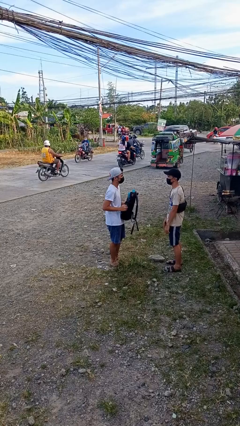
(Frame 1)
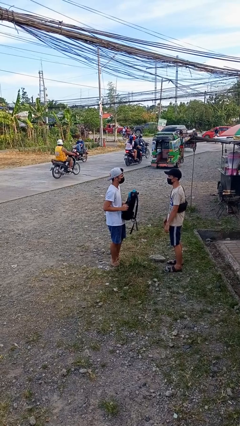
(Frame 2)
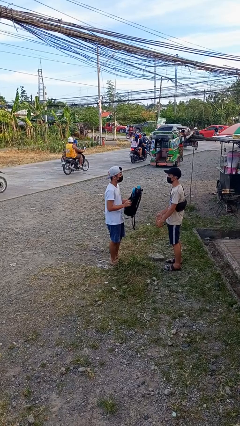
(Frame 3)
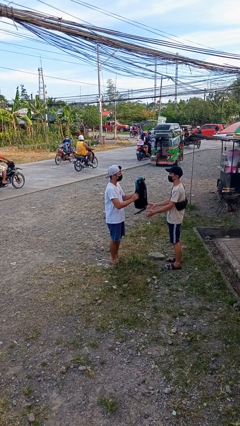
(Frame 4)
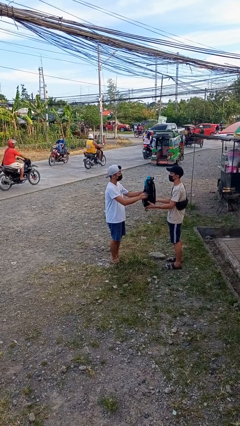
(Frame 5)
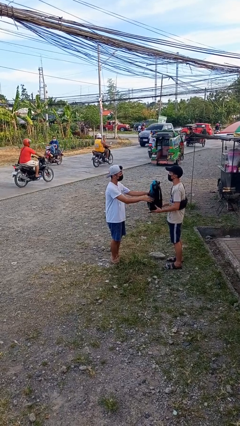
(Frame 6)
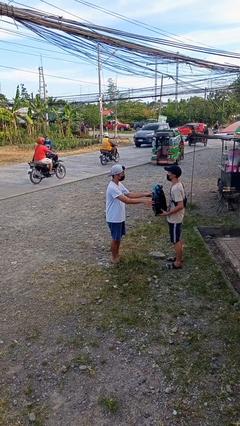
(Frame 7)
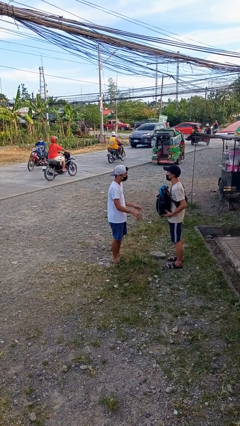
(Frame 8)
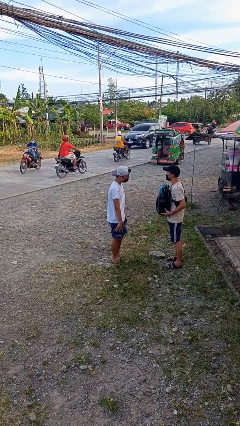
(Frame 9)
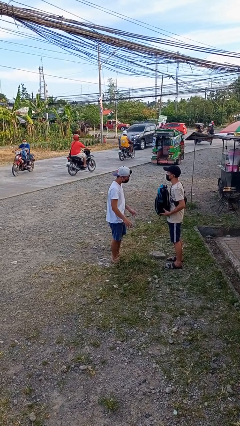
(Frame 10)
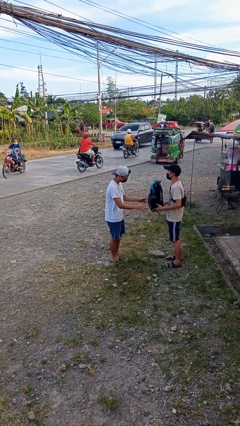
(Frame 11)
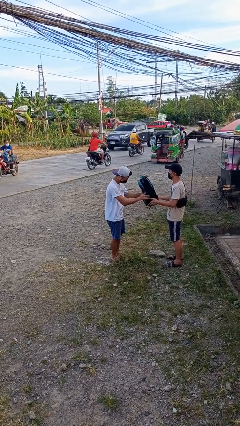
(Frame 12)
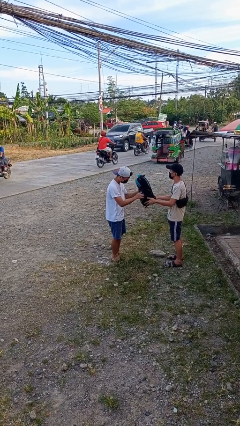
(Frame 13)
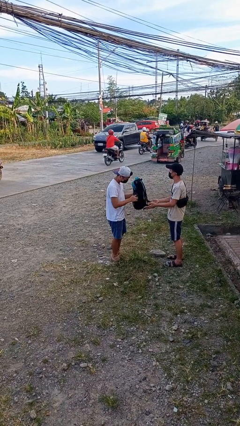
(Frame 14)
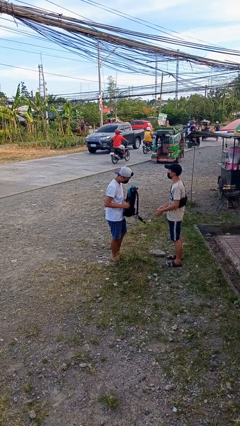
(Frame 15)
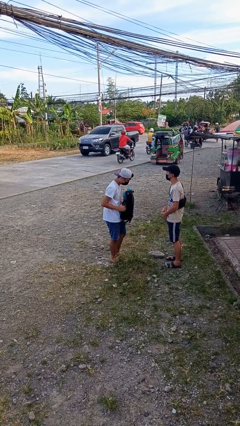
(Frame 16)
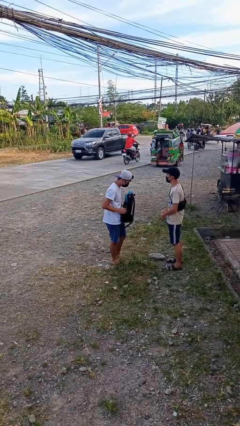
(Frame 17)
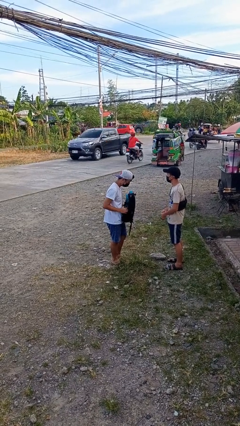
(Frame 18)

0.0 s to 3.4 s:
person transfers object to person

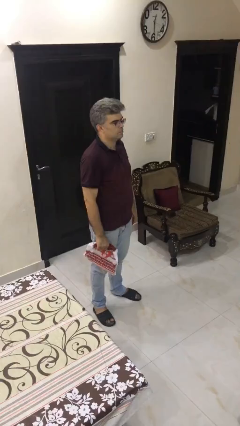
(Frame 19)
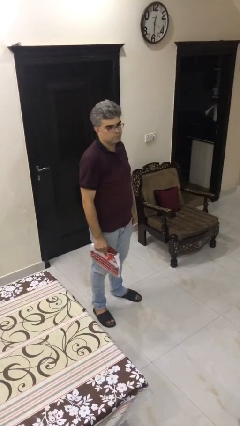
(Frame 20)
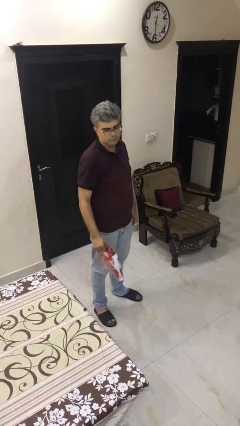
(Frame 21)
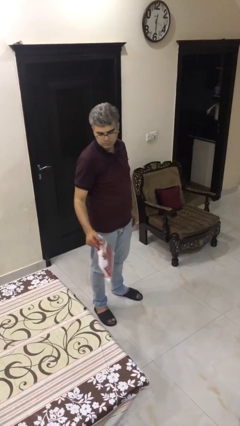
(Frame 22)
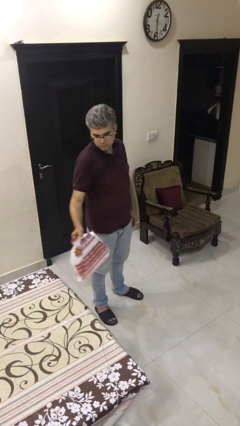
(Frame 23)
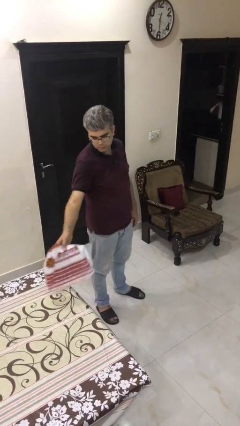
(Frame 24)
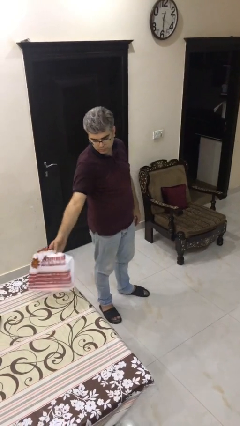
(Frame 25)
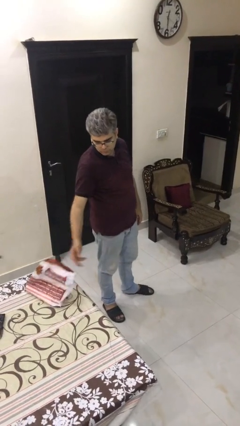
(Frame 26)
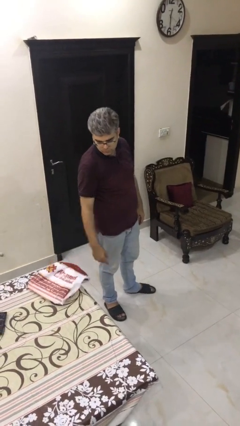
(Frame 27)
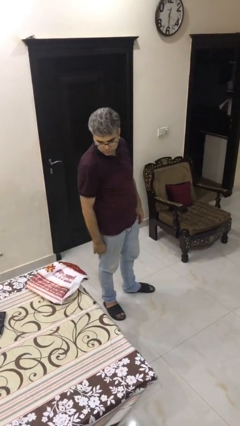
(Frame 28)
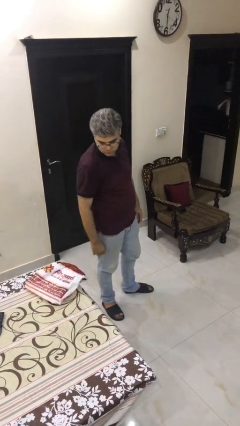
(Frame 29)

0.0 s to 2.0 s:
person puts down object on table

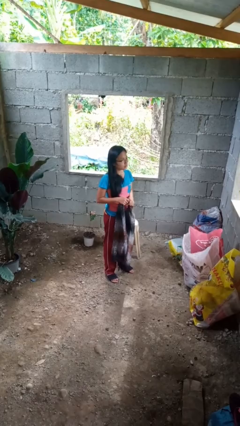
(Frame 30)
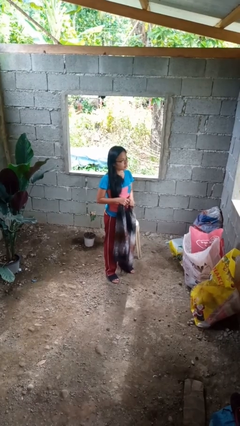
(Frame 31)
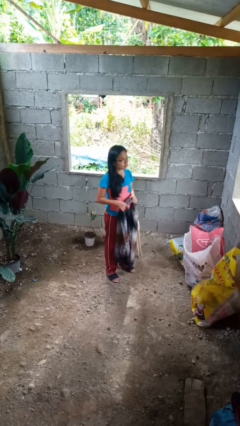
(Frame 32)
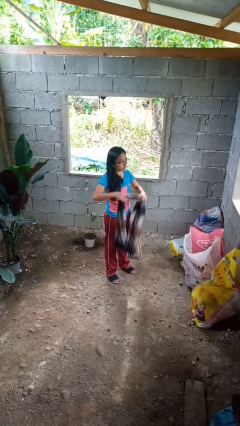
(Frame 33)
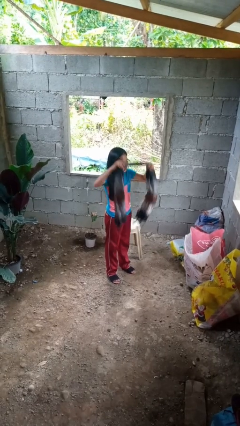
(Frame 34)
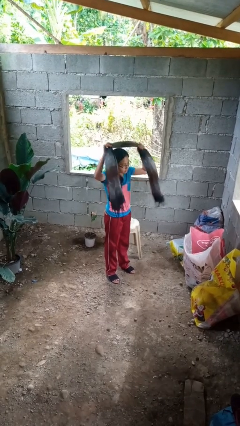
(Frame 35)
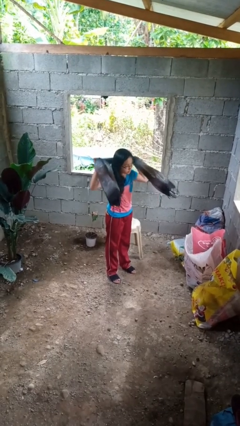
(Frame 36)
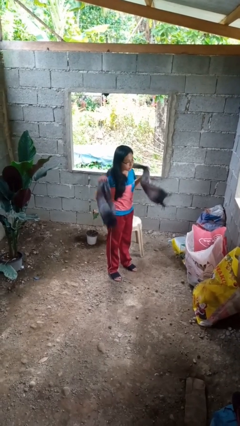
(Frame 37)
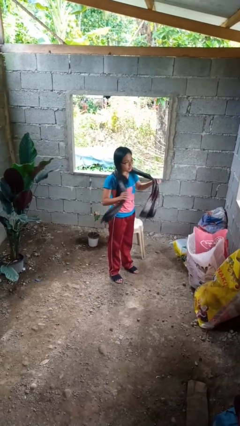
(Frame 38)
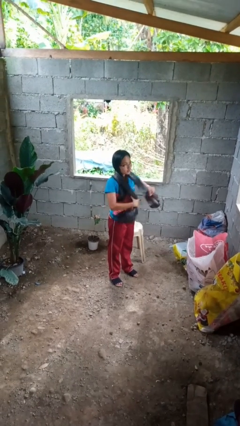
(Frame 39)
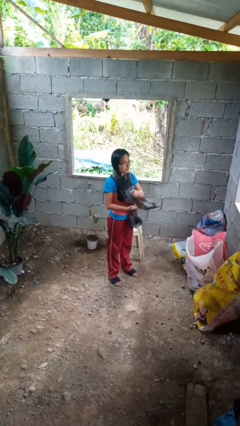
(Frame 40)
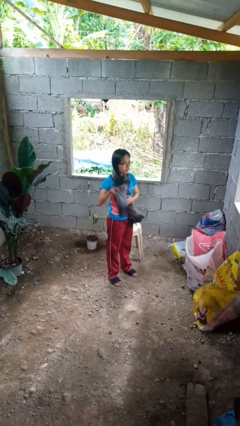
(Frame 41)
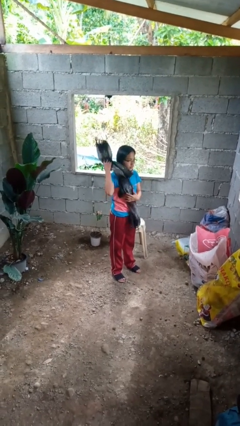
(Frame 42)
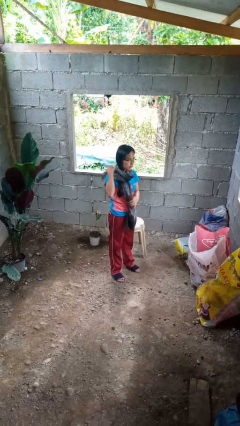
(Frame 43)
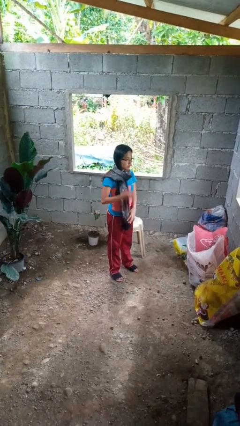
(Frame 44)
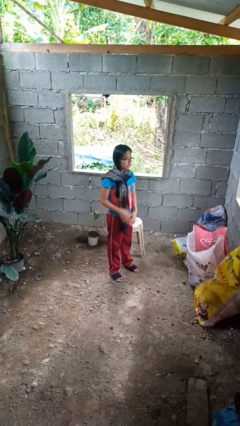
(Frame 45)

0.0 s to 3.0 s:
person puts on scarf

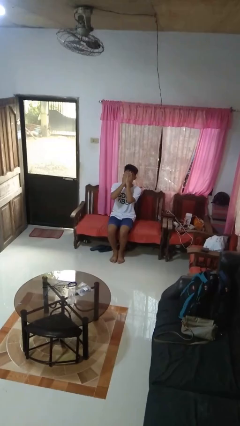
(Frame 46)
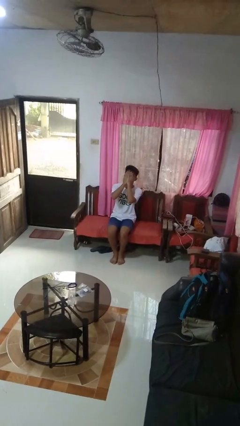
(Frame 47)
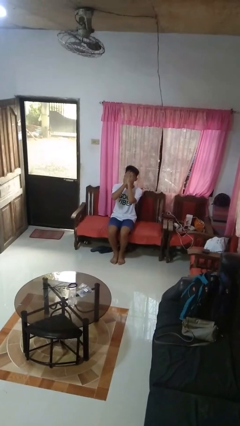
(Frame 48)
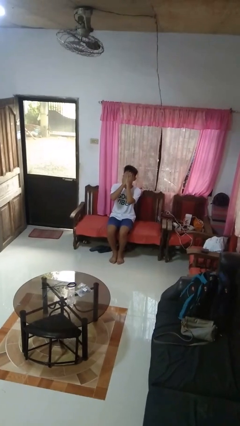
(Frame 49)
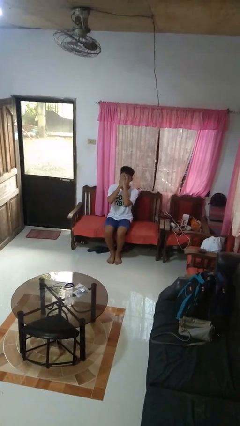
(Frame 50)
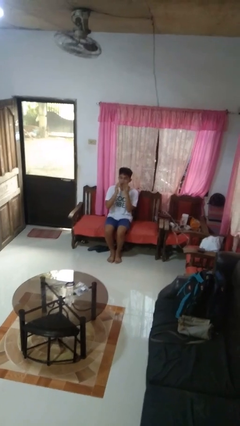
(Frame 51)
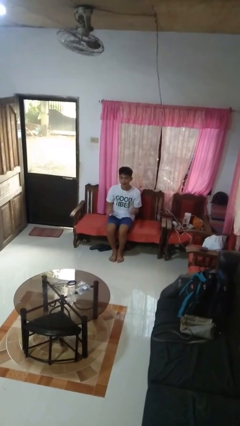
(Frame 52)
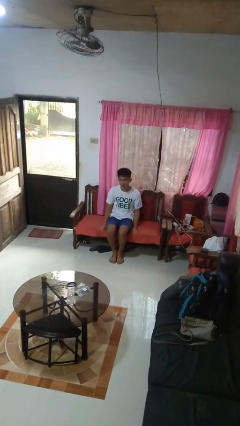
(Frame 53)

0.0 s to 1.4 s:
person covers face with hands

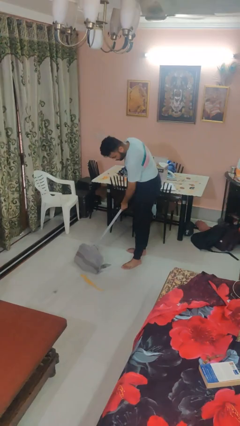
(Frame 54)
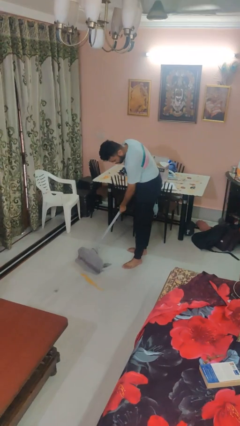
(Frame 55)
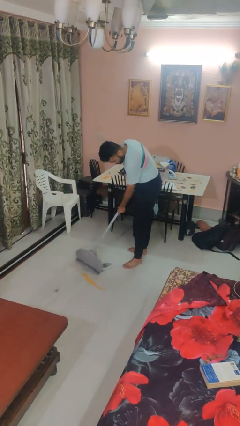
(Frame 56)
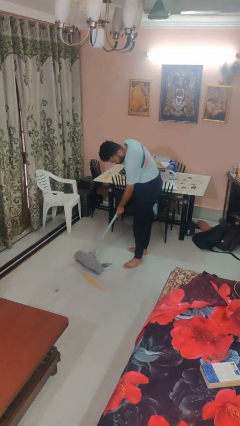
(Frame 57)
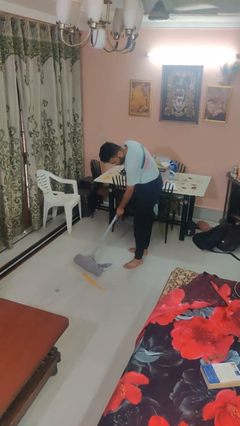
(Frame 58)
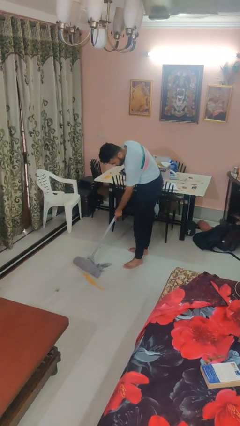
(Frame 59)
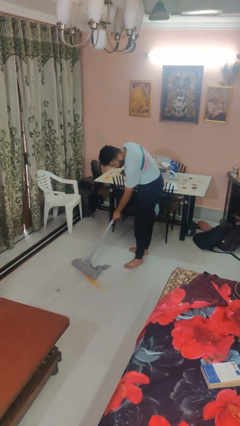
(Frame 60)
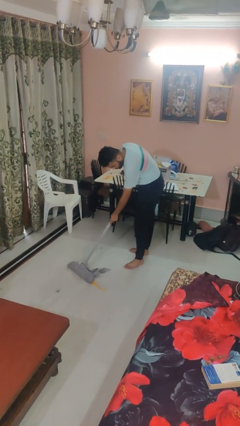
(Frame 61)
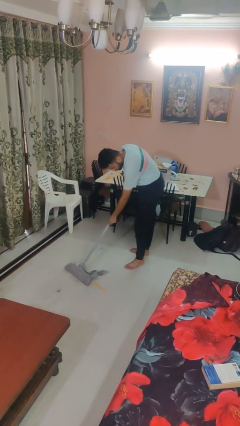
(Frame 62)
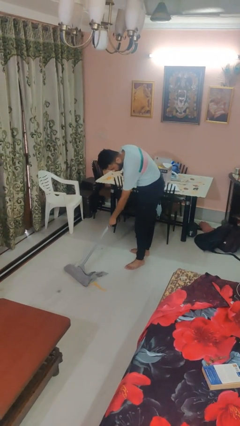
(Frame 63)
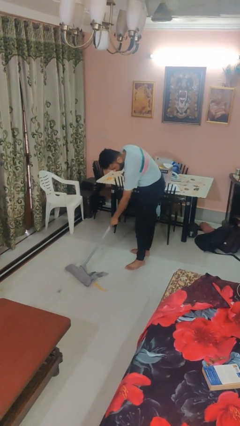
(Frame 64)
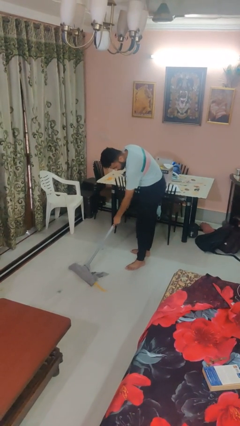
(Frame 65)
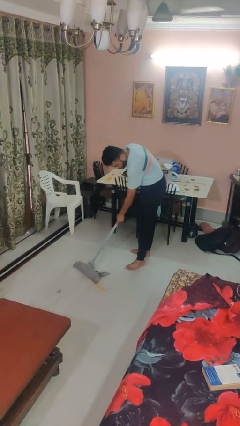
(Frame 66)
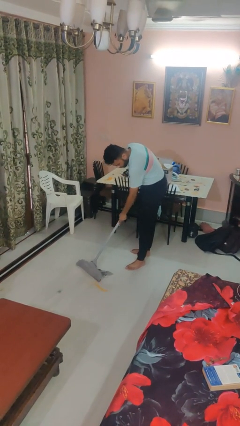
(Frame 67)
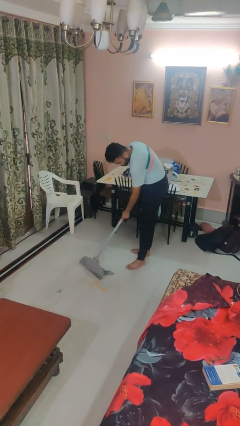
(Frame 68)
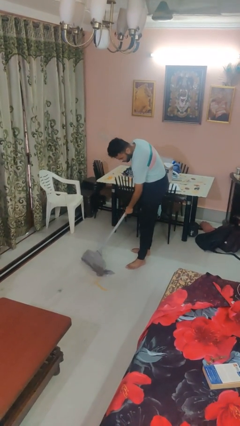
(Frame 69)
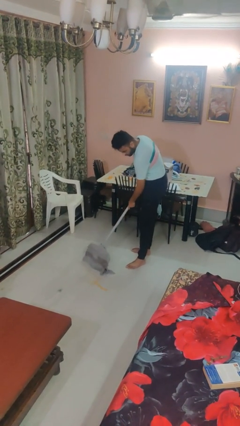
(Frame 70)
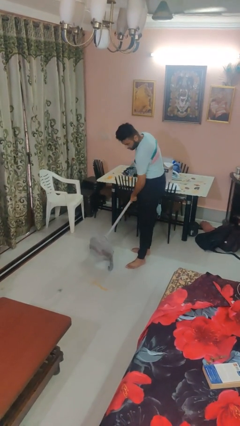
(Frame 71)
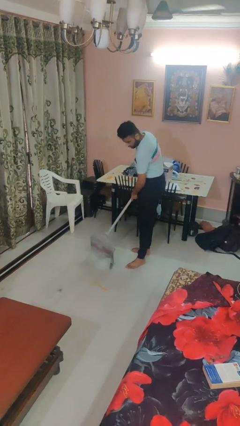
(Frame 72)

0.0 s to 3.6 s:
person mops

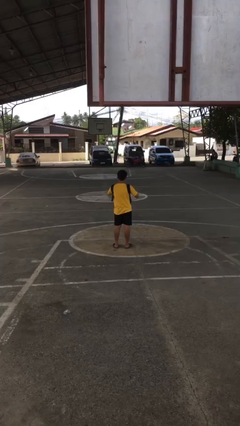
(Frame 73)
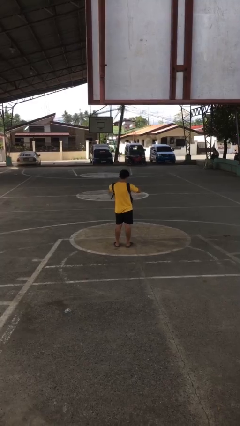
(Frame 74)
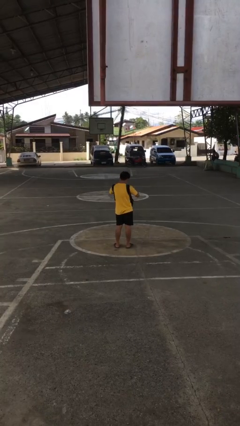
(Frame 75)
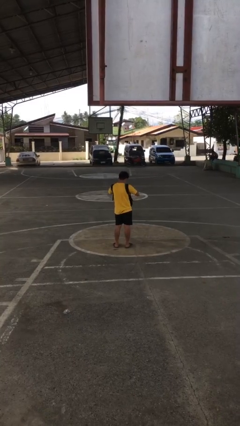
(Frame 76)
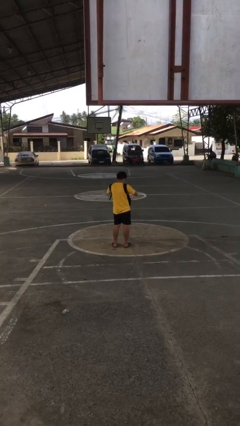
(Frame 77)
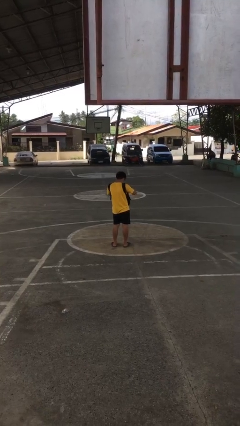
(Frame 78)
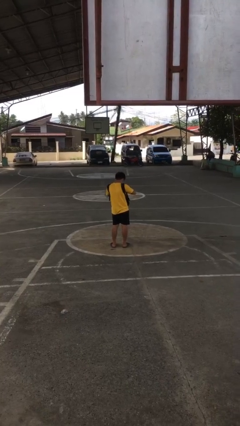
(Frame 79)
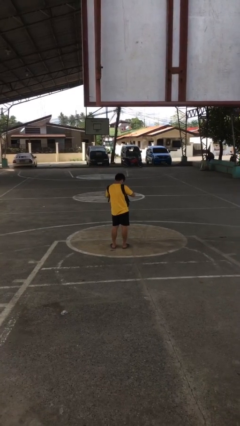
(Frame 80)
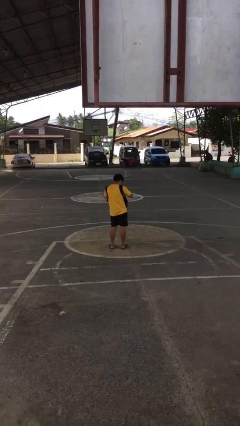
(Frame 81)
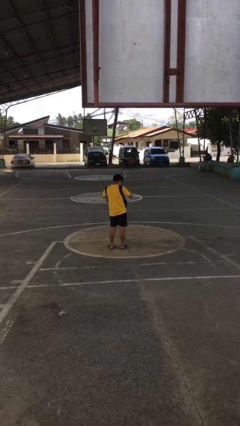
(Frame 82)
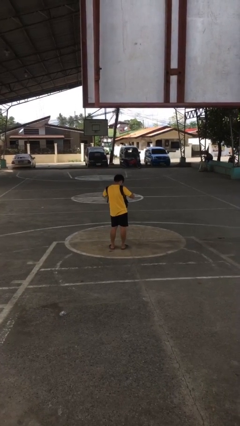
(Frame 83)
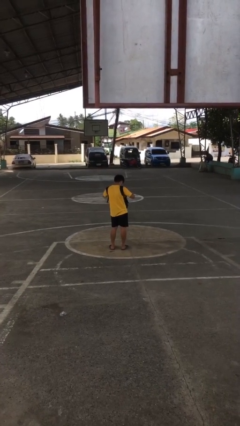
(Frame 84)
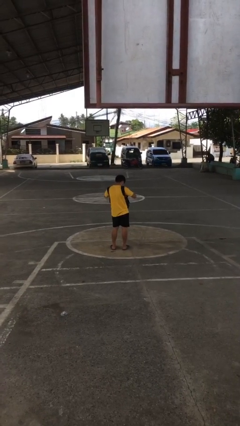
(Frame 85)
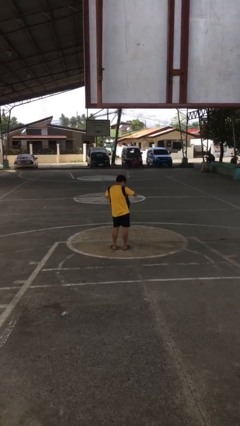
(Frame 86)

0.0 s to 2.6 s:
person searches in backpack

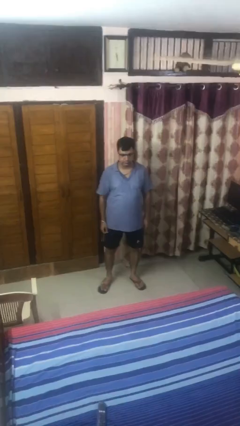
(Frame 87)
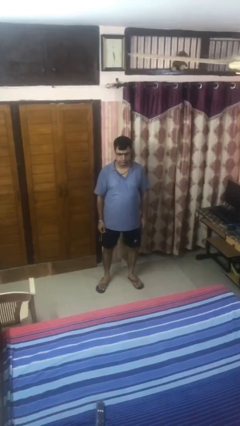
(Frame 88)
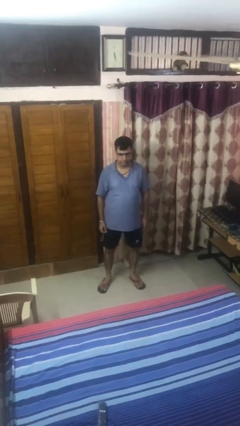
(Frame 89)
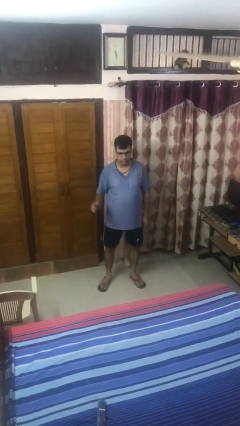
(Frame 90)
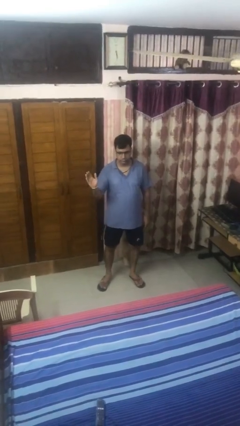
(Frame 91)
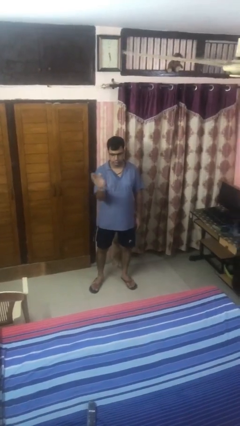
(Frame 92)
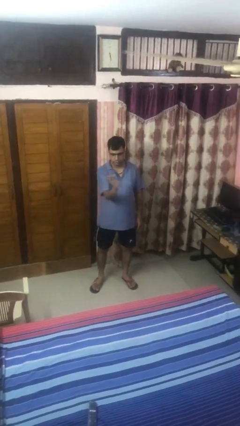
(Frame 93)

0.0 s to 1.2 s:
person gestures swipe left
